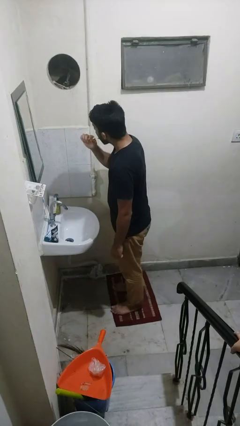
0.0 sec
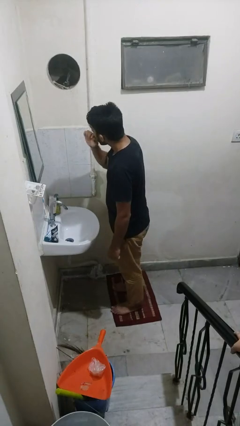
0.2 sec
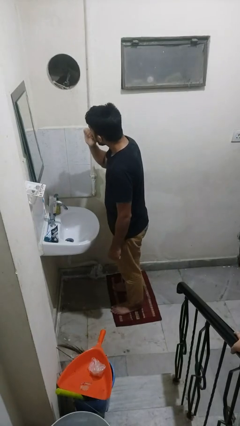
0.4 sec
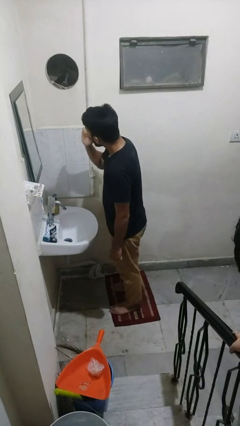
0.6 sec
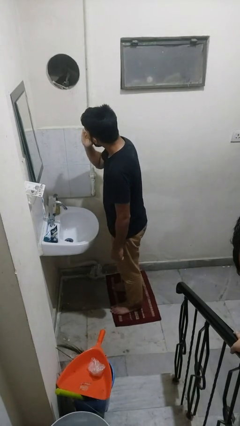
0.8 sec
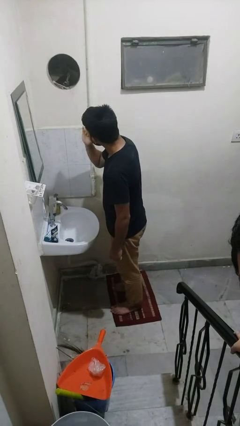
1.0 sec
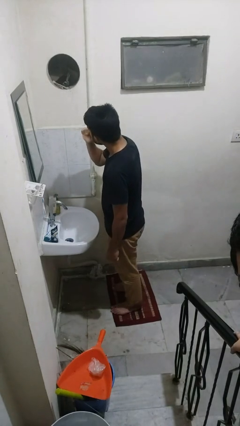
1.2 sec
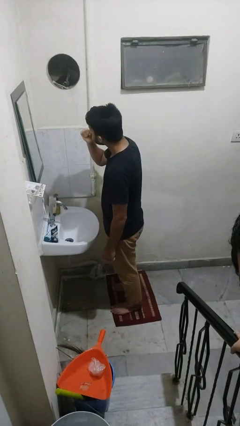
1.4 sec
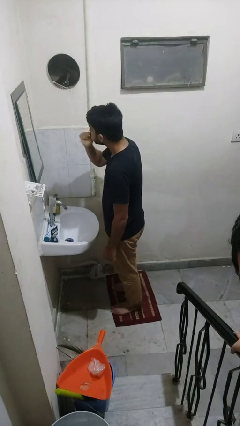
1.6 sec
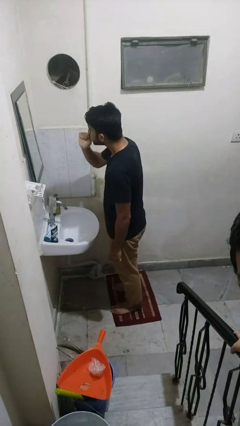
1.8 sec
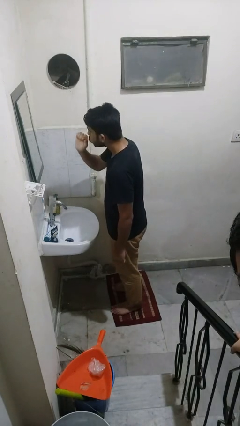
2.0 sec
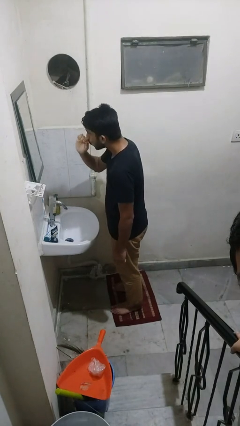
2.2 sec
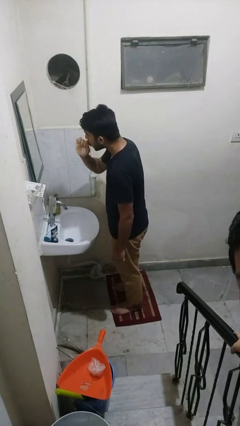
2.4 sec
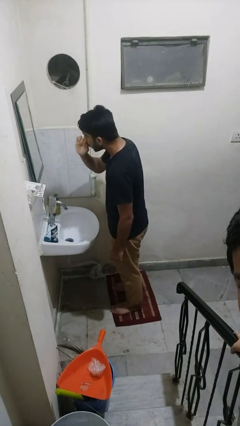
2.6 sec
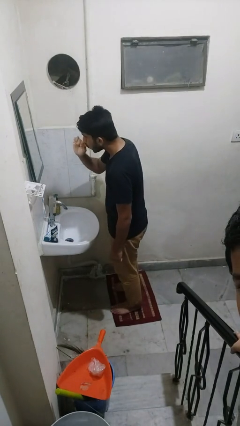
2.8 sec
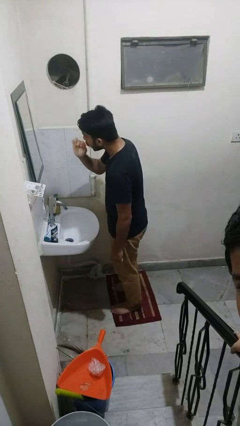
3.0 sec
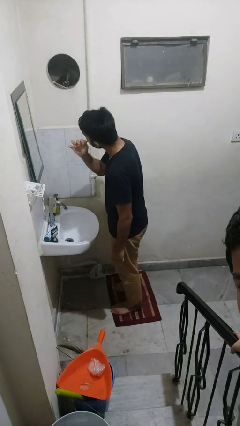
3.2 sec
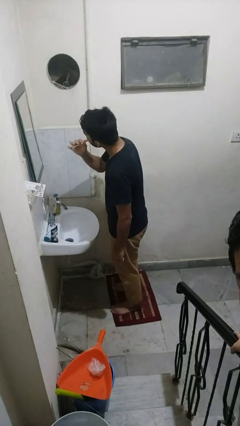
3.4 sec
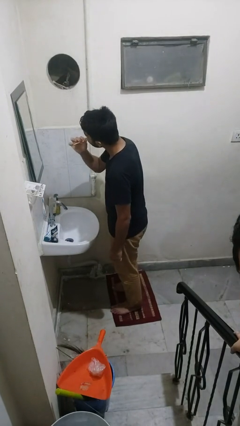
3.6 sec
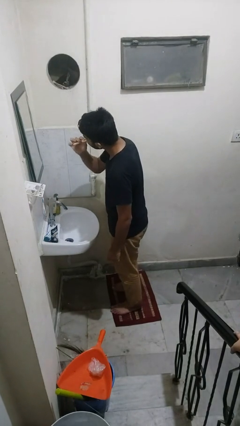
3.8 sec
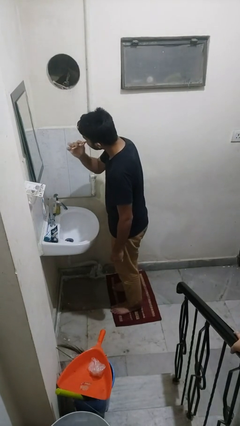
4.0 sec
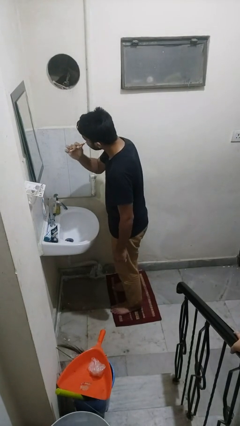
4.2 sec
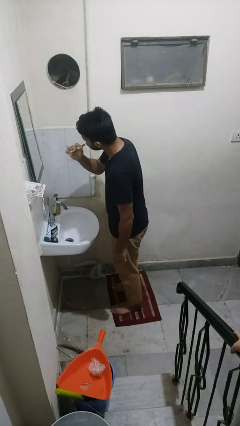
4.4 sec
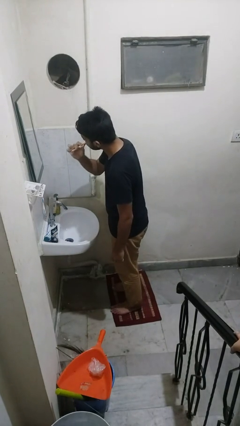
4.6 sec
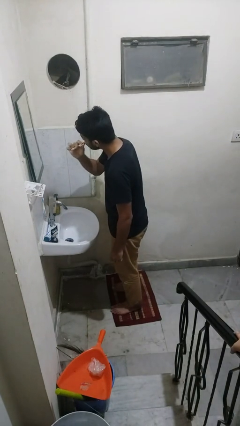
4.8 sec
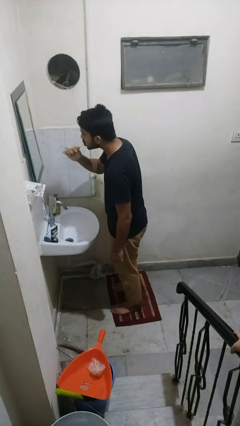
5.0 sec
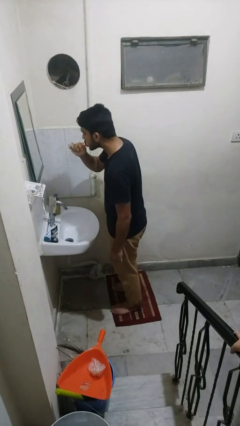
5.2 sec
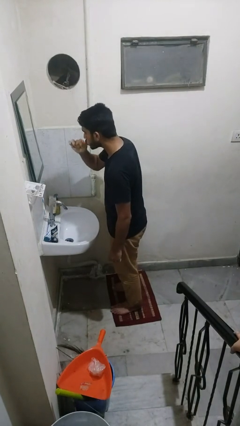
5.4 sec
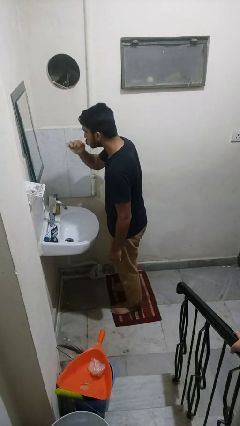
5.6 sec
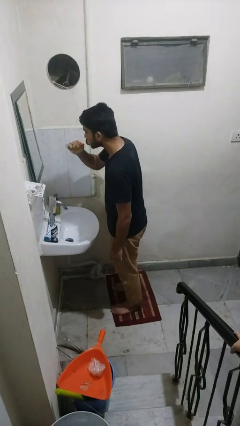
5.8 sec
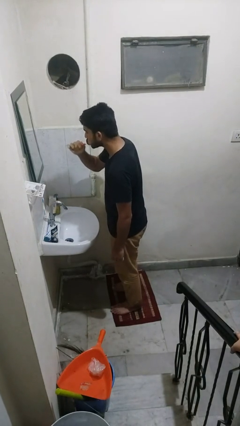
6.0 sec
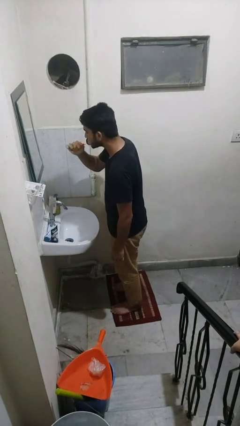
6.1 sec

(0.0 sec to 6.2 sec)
person brushes teeth

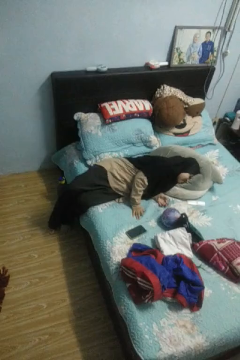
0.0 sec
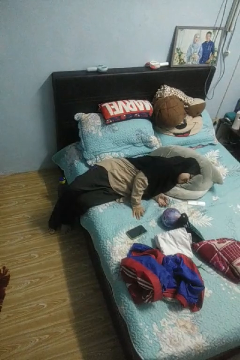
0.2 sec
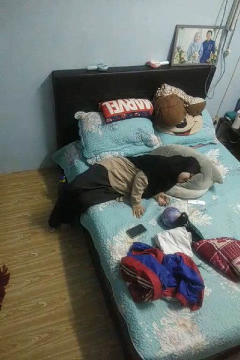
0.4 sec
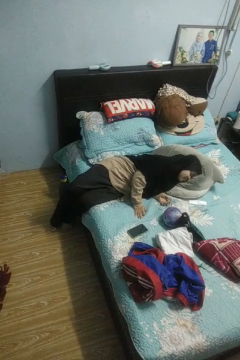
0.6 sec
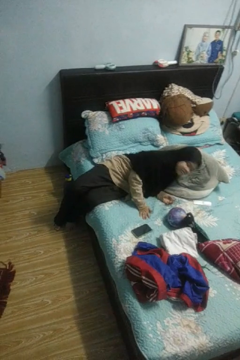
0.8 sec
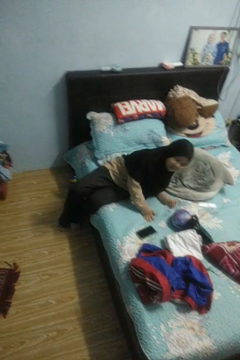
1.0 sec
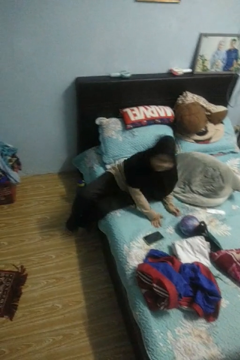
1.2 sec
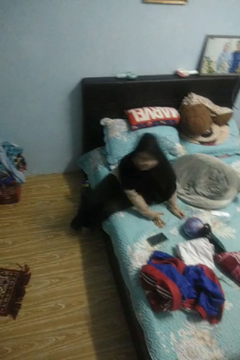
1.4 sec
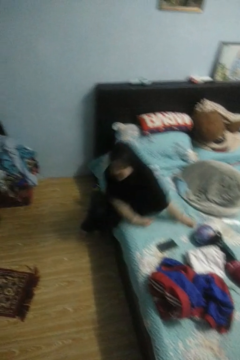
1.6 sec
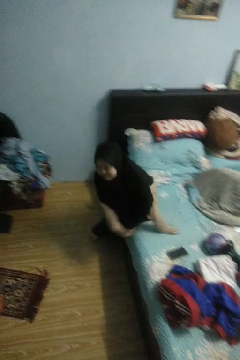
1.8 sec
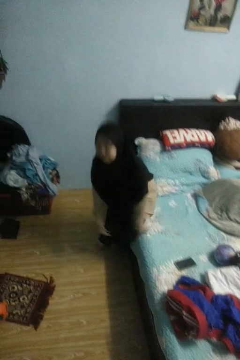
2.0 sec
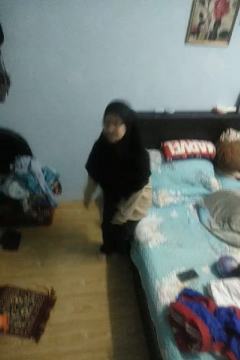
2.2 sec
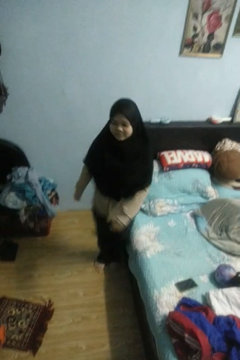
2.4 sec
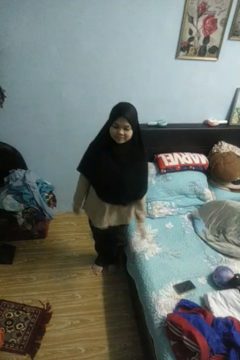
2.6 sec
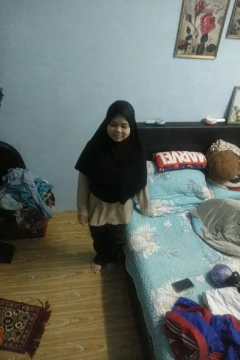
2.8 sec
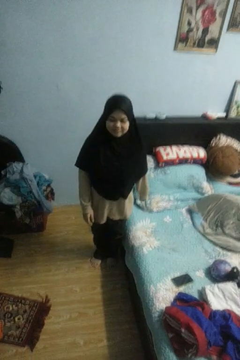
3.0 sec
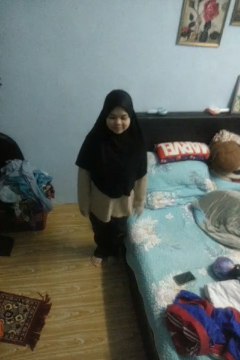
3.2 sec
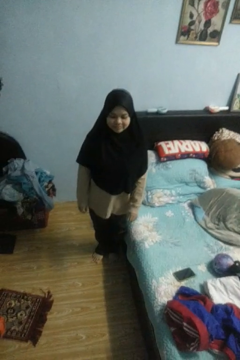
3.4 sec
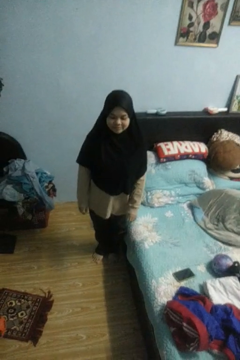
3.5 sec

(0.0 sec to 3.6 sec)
person stands up

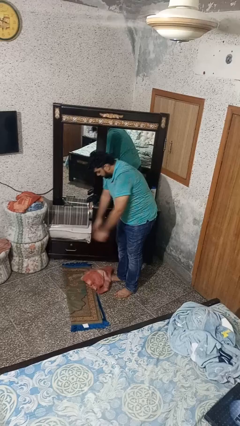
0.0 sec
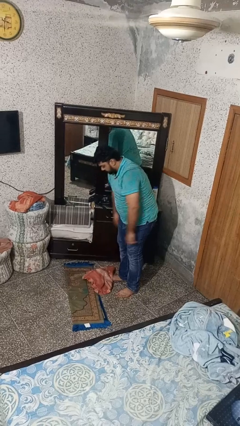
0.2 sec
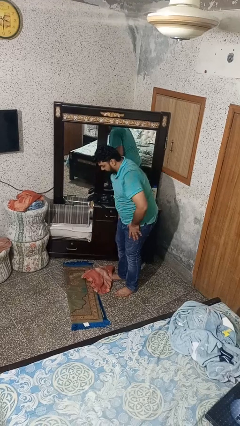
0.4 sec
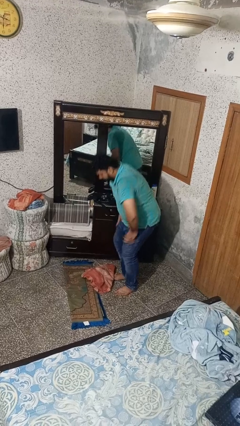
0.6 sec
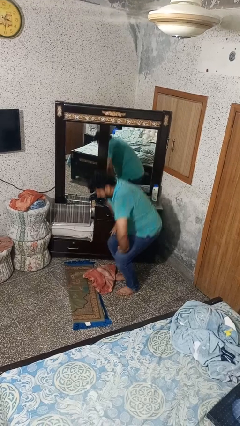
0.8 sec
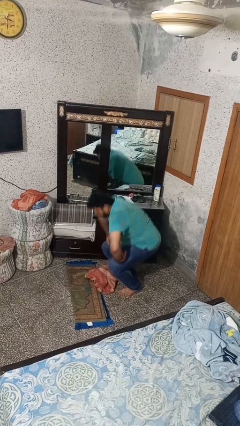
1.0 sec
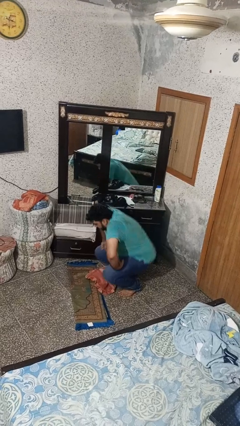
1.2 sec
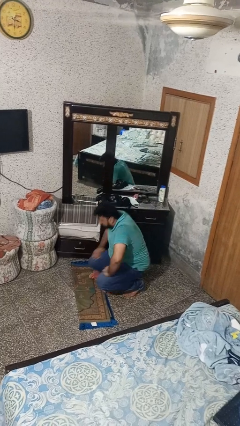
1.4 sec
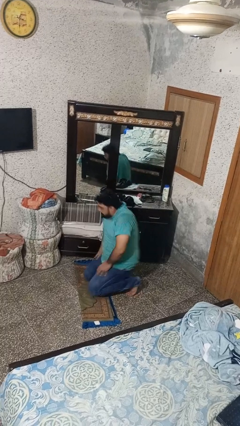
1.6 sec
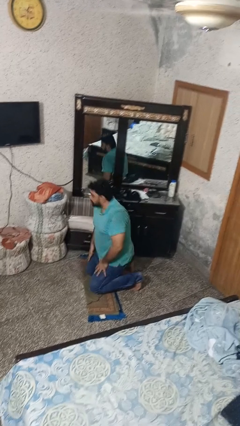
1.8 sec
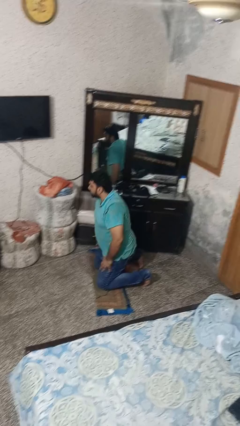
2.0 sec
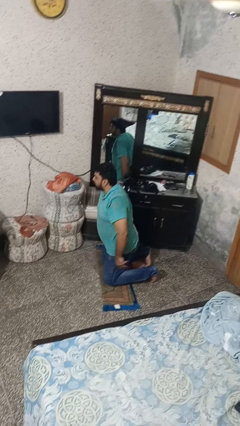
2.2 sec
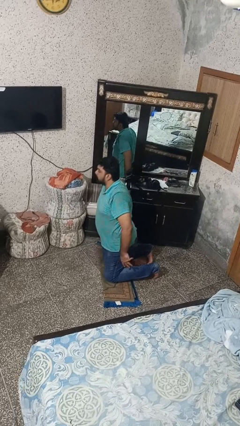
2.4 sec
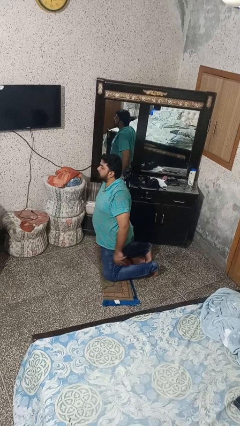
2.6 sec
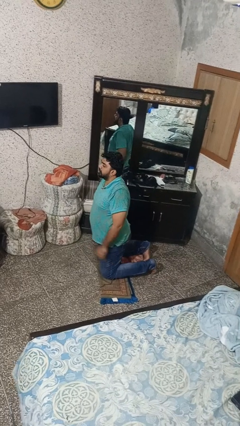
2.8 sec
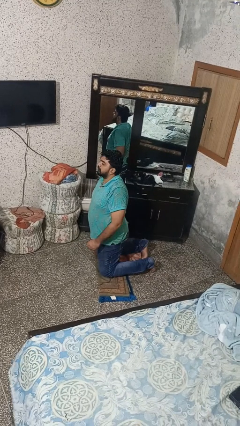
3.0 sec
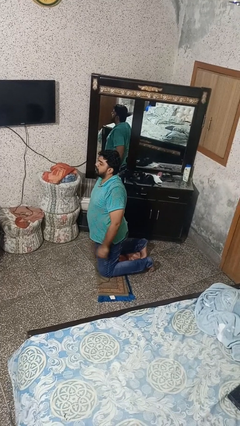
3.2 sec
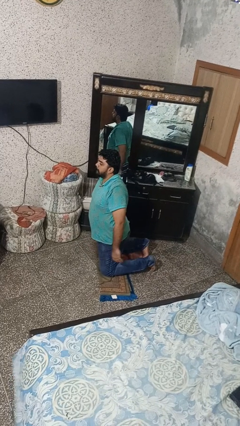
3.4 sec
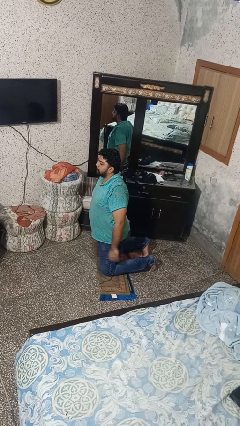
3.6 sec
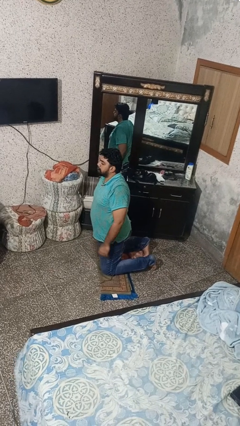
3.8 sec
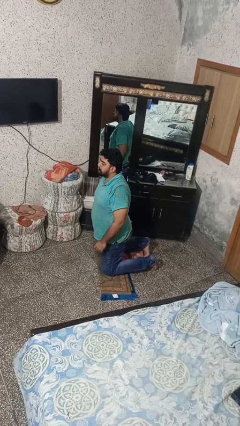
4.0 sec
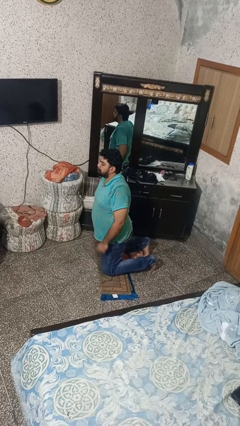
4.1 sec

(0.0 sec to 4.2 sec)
person kneels

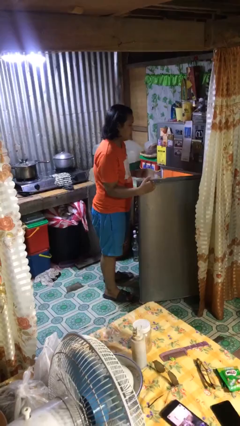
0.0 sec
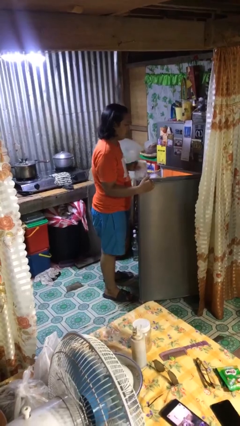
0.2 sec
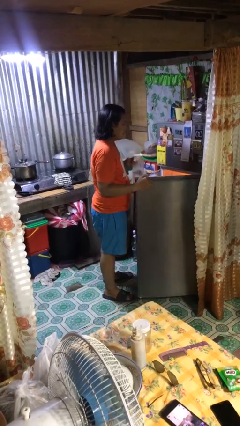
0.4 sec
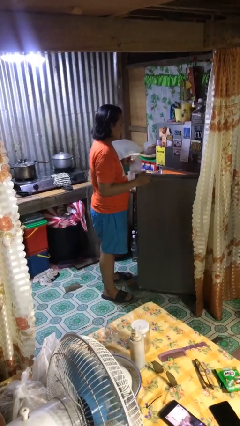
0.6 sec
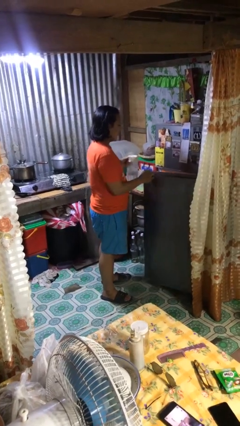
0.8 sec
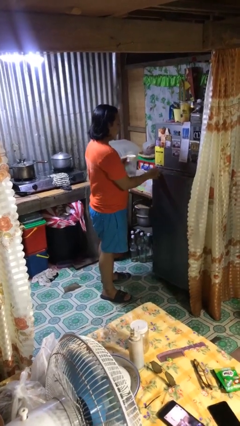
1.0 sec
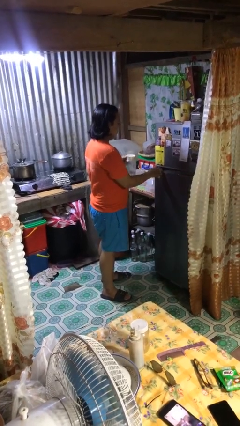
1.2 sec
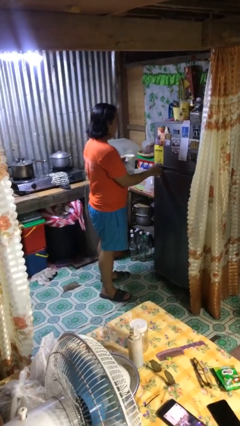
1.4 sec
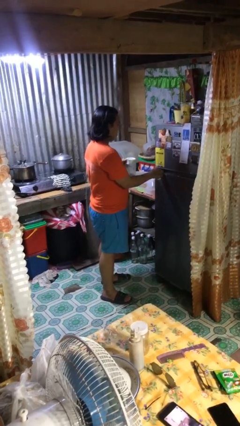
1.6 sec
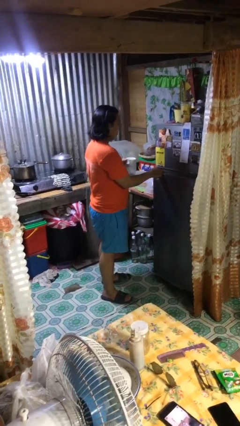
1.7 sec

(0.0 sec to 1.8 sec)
person closes refrigerator

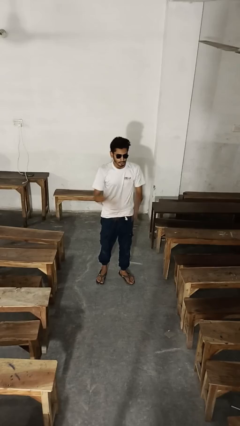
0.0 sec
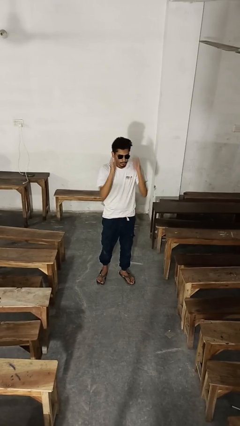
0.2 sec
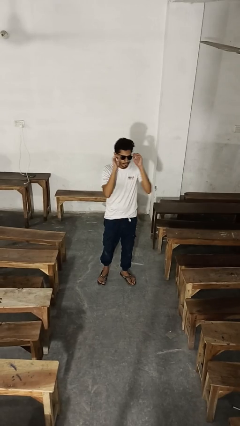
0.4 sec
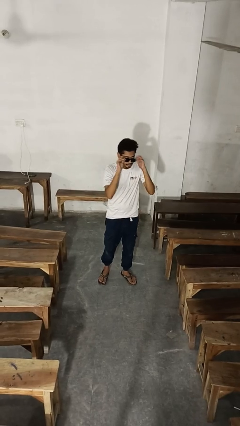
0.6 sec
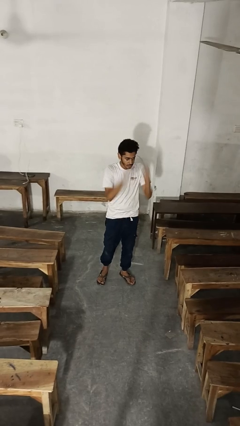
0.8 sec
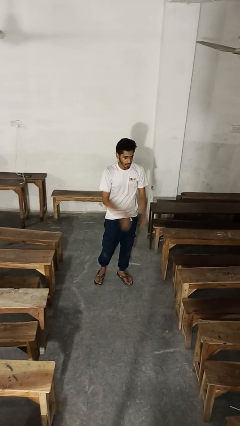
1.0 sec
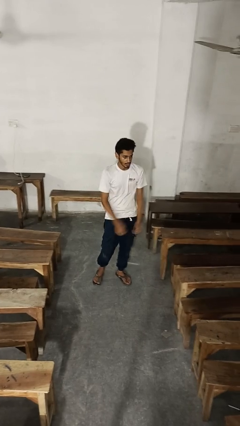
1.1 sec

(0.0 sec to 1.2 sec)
person takes off sunglasses

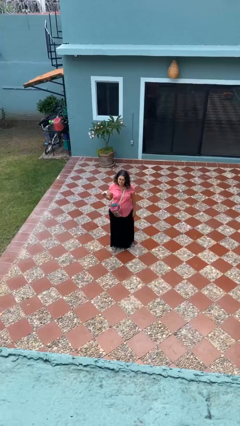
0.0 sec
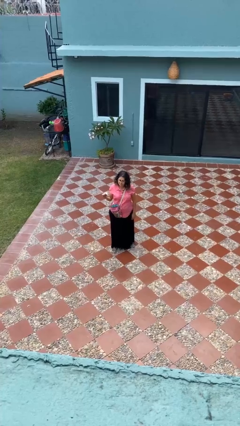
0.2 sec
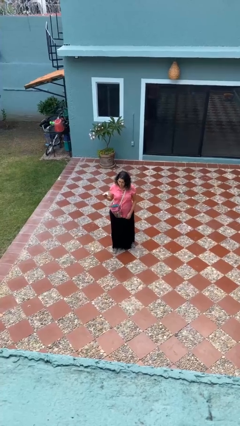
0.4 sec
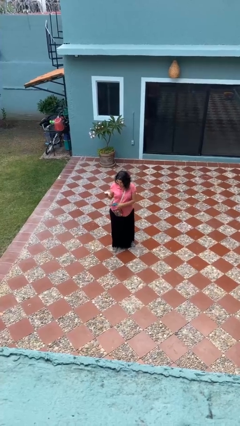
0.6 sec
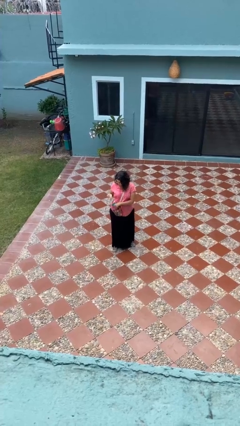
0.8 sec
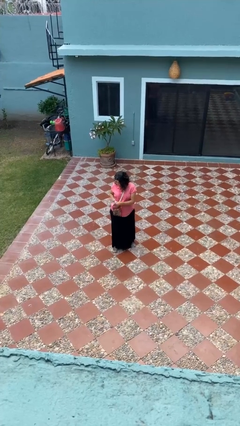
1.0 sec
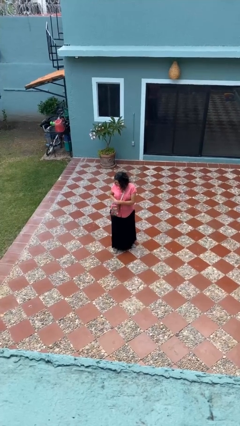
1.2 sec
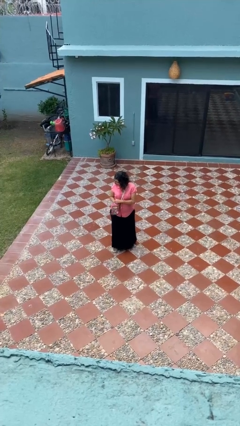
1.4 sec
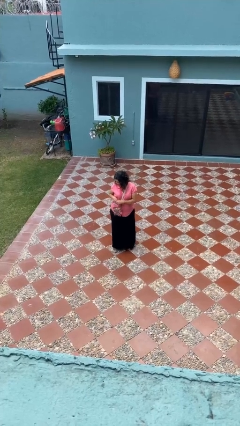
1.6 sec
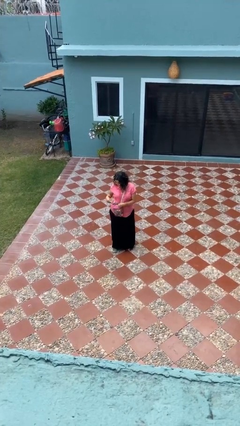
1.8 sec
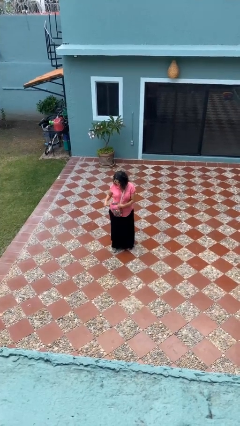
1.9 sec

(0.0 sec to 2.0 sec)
person puts object into purse
